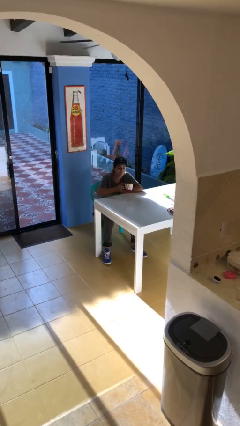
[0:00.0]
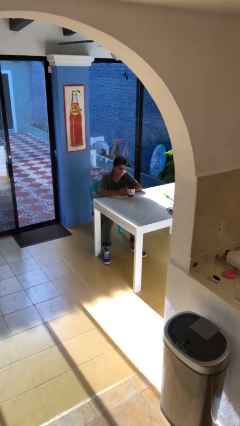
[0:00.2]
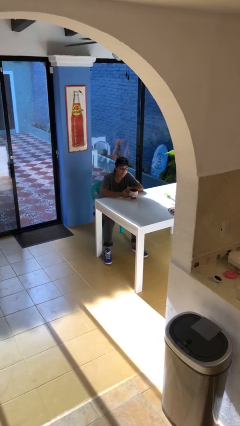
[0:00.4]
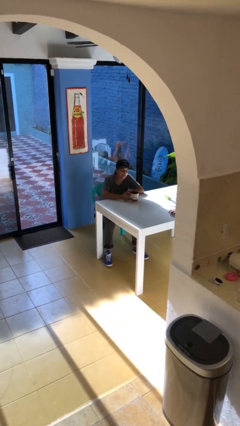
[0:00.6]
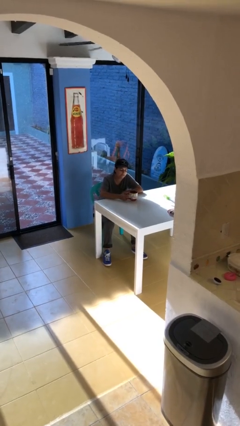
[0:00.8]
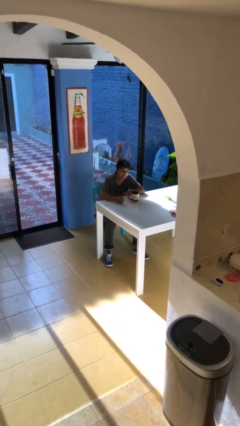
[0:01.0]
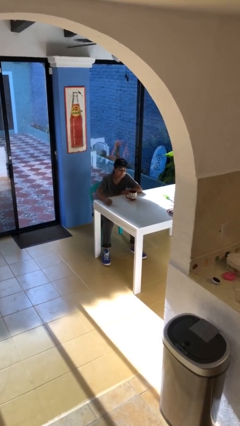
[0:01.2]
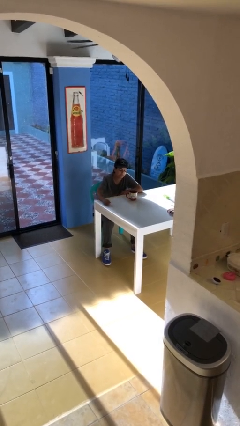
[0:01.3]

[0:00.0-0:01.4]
person puts down object on table

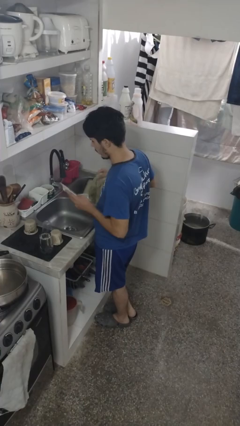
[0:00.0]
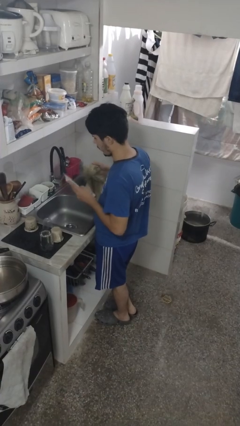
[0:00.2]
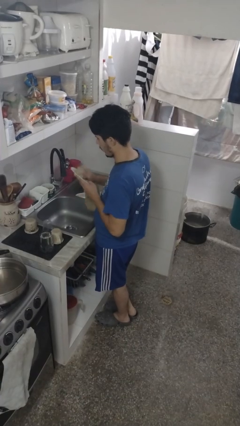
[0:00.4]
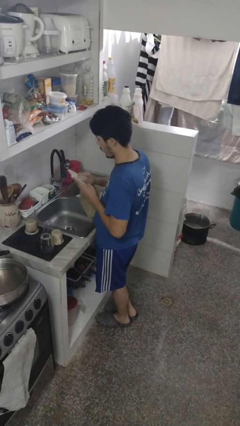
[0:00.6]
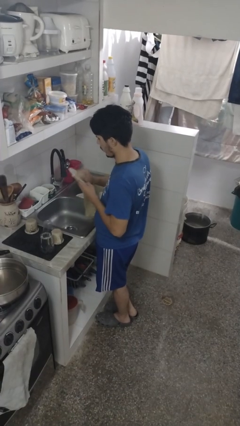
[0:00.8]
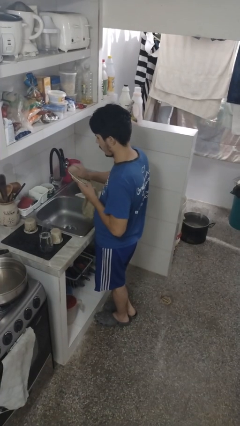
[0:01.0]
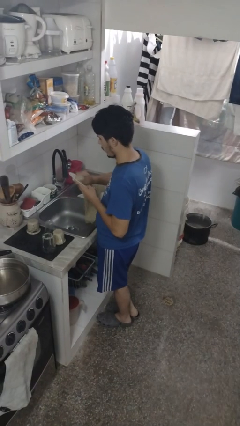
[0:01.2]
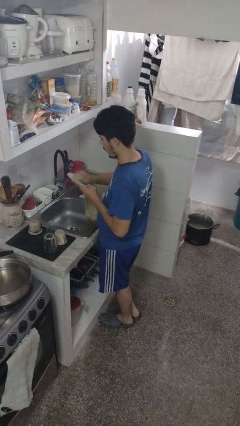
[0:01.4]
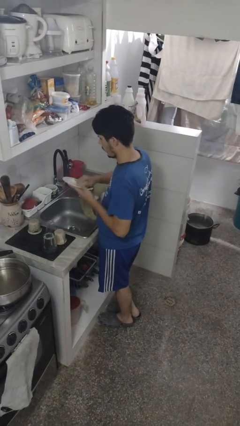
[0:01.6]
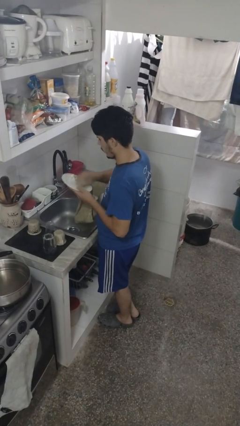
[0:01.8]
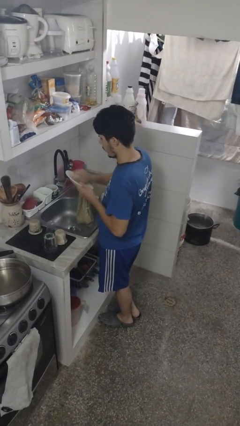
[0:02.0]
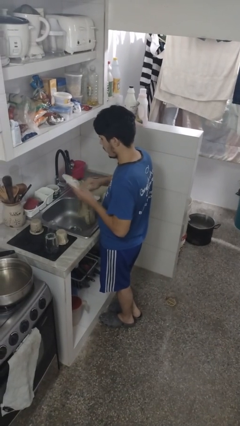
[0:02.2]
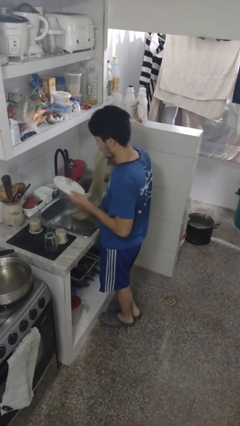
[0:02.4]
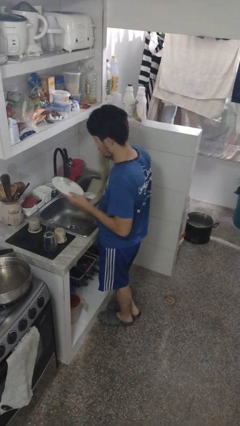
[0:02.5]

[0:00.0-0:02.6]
person dries dish

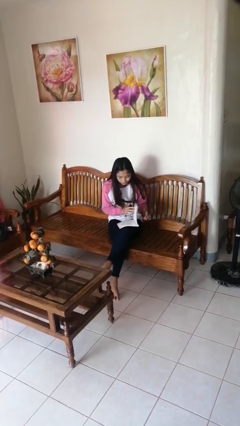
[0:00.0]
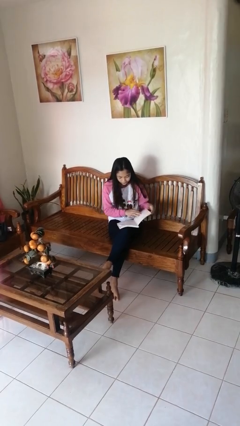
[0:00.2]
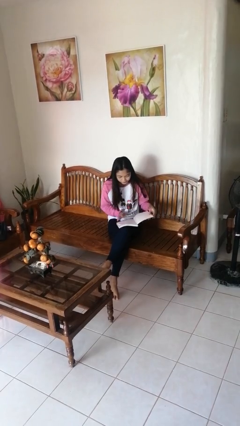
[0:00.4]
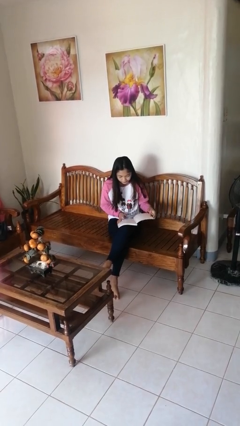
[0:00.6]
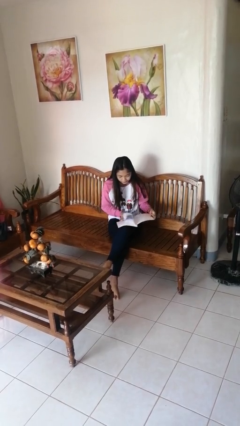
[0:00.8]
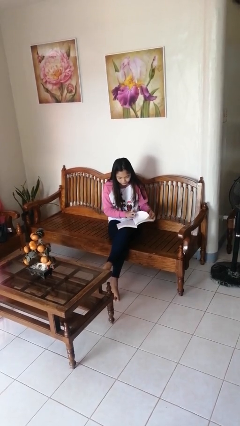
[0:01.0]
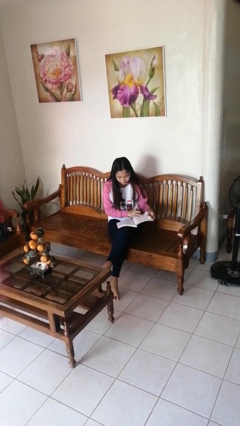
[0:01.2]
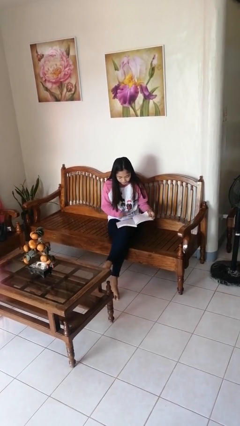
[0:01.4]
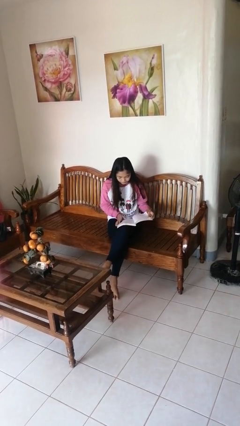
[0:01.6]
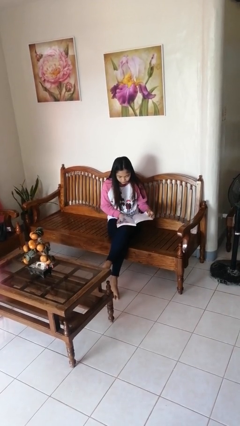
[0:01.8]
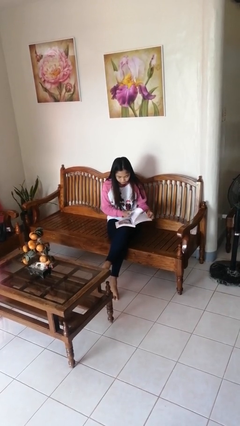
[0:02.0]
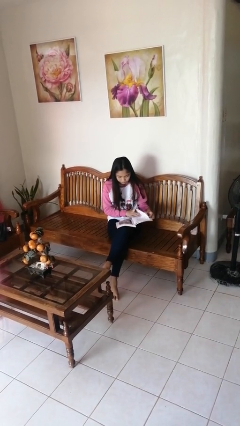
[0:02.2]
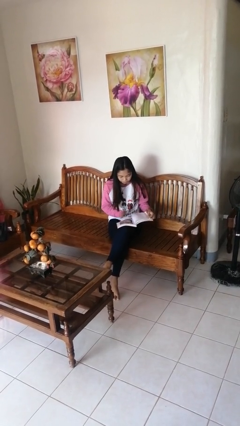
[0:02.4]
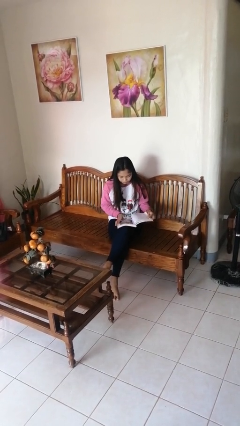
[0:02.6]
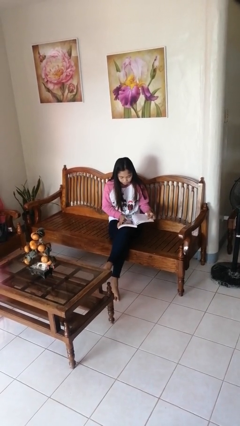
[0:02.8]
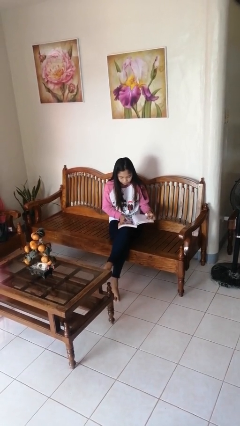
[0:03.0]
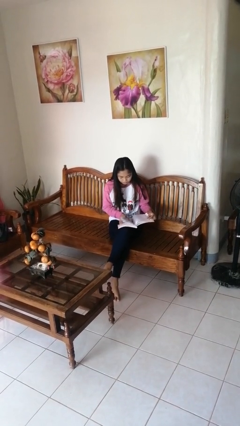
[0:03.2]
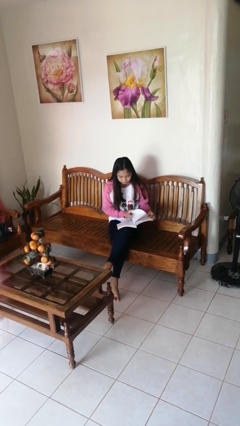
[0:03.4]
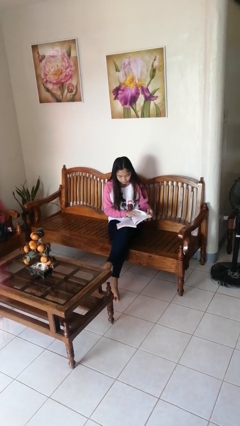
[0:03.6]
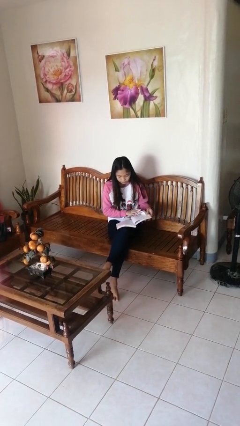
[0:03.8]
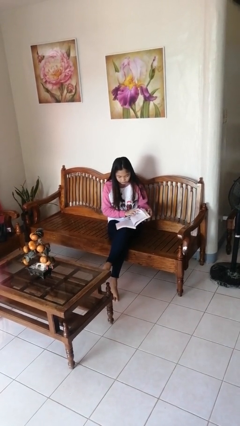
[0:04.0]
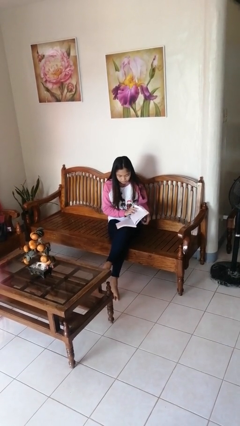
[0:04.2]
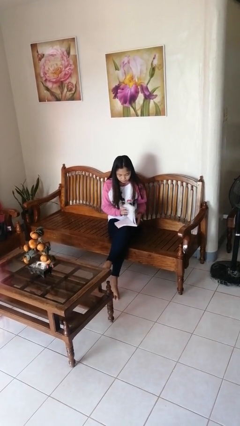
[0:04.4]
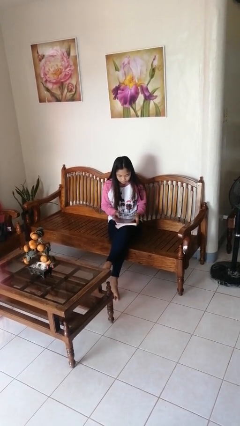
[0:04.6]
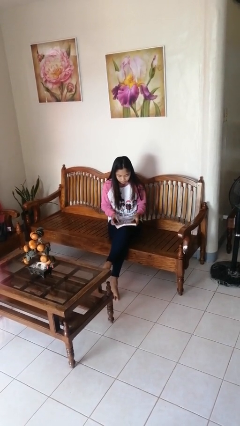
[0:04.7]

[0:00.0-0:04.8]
person reads book

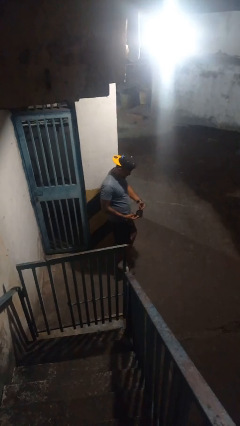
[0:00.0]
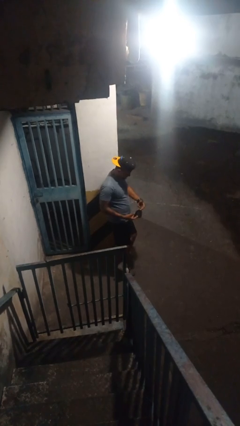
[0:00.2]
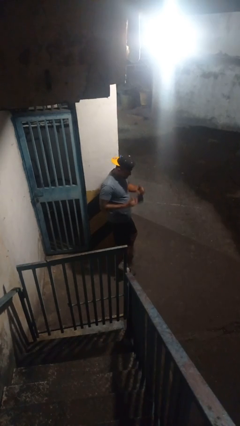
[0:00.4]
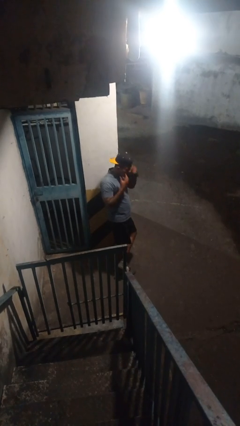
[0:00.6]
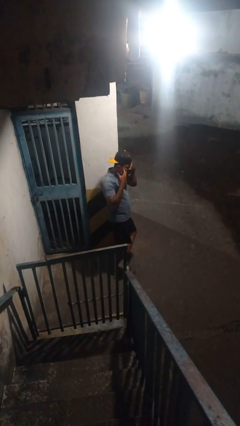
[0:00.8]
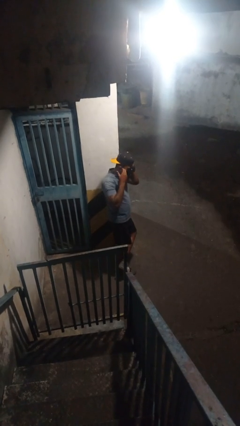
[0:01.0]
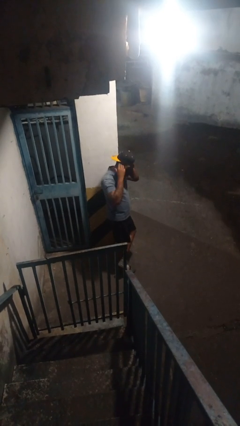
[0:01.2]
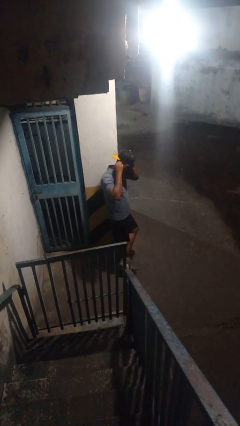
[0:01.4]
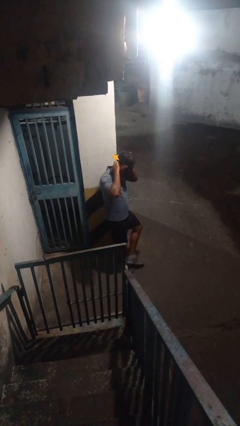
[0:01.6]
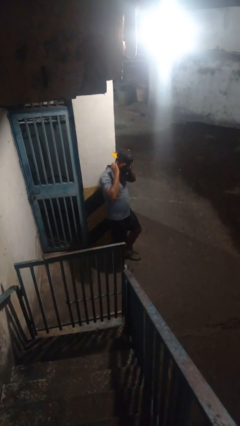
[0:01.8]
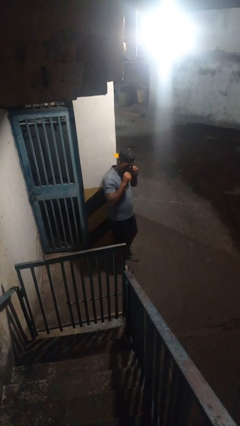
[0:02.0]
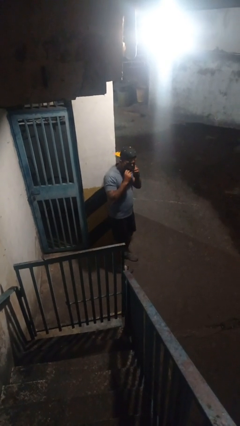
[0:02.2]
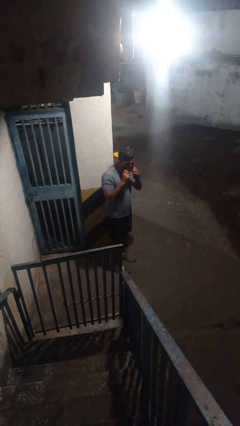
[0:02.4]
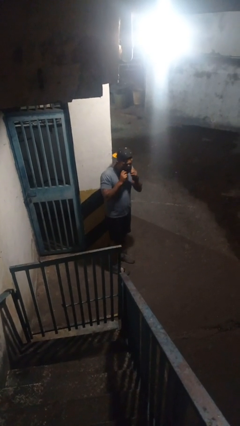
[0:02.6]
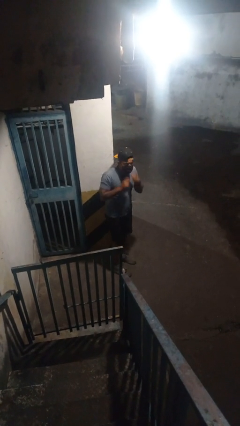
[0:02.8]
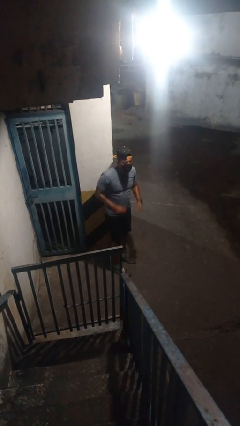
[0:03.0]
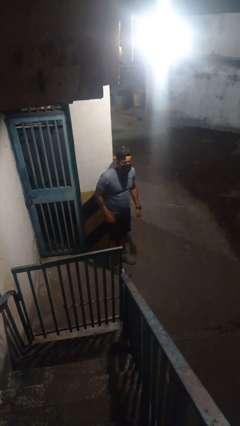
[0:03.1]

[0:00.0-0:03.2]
person puts on facemask

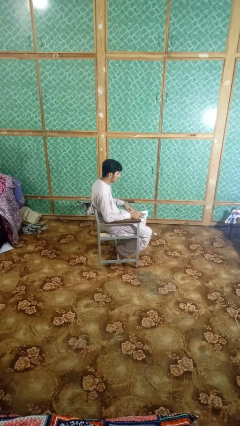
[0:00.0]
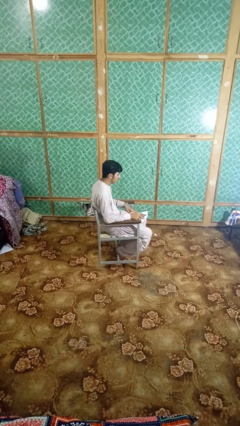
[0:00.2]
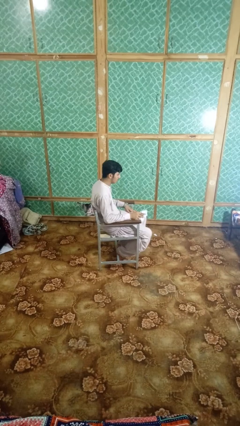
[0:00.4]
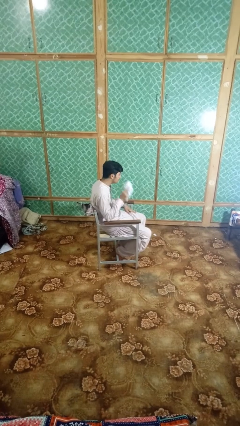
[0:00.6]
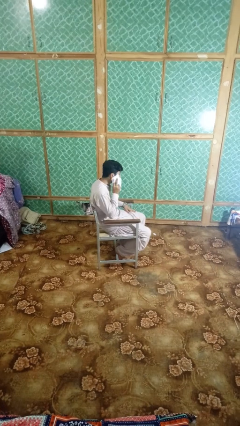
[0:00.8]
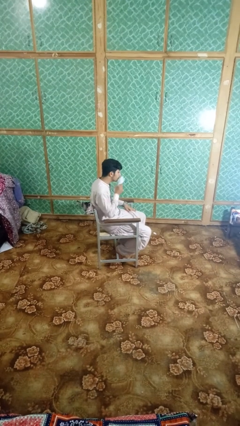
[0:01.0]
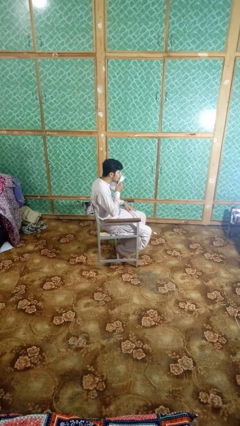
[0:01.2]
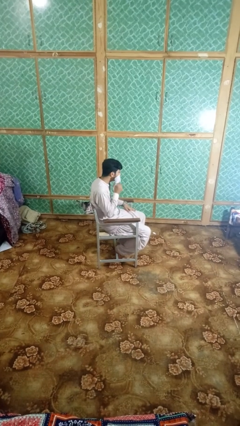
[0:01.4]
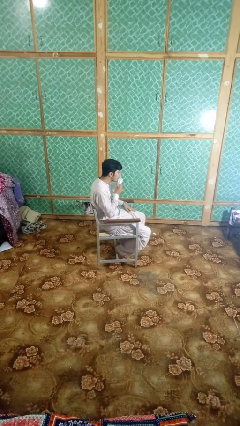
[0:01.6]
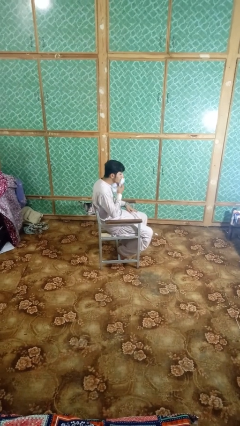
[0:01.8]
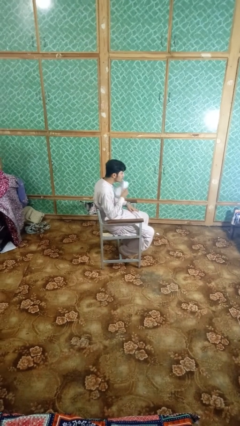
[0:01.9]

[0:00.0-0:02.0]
person wipes mouth with napkin

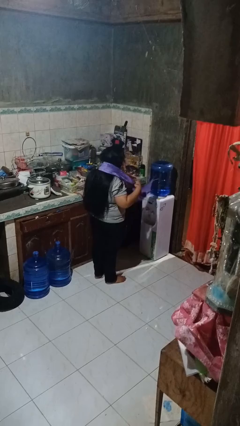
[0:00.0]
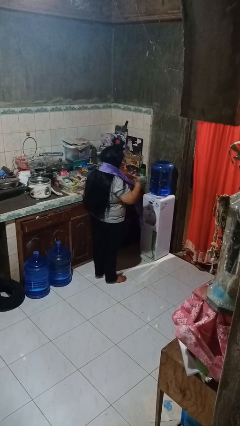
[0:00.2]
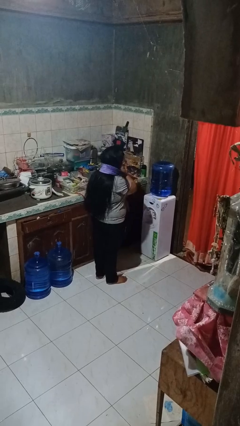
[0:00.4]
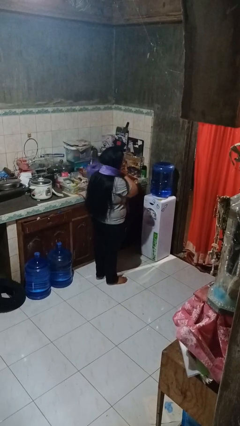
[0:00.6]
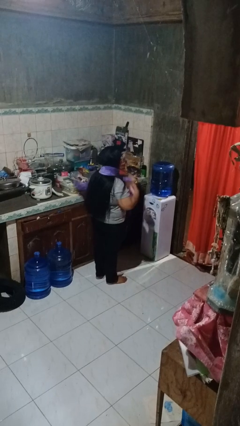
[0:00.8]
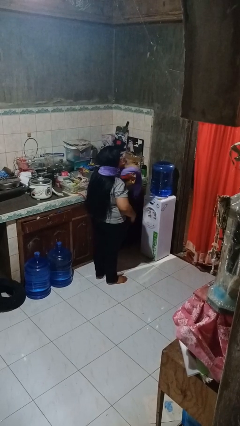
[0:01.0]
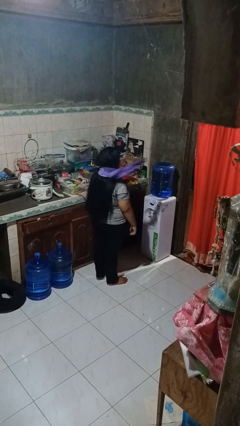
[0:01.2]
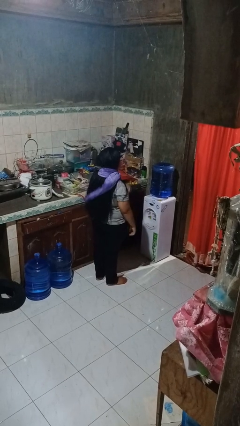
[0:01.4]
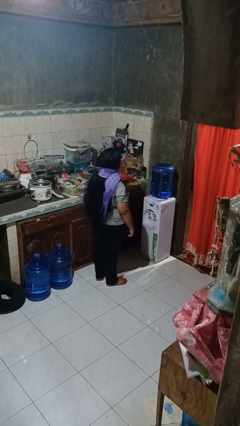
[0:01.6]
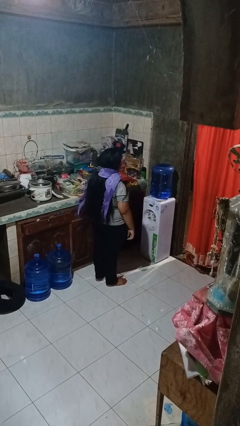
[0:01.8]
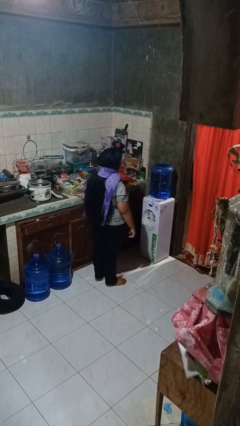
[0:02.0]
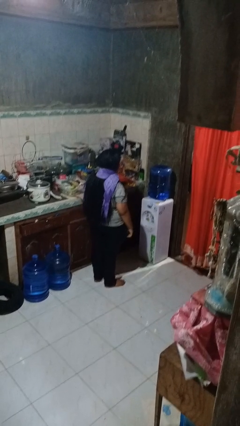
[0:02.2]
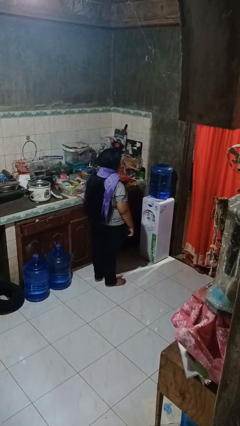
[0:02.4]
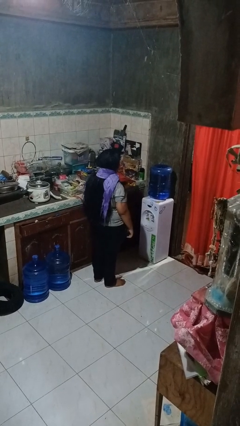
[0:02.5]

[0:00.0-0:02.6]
person puts on scarf

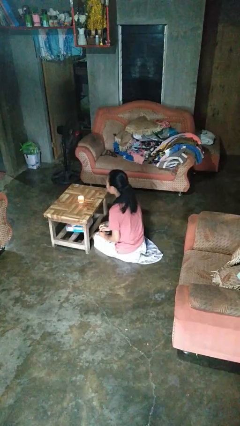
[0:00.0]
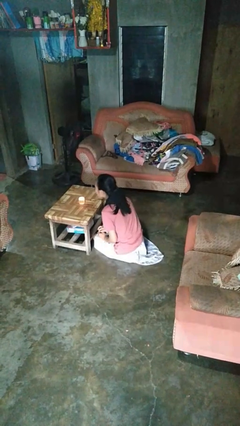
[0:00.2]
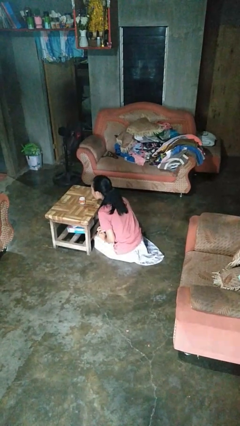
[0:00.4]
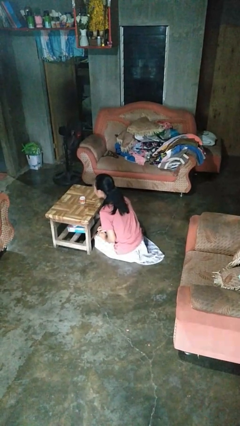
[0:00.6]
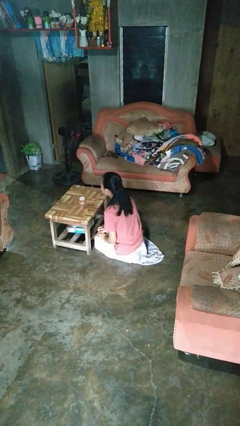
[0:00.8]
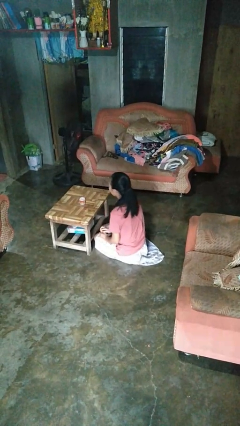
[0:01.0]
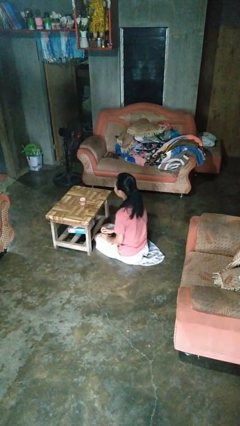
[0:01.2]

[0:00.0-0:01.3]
person extinguishes candle
